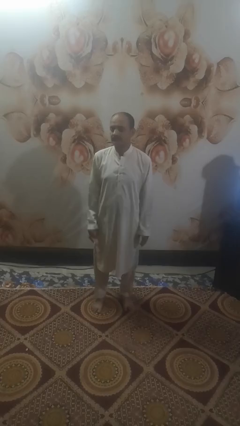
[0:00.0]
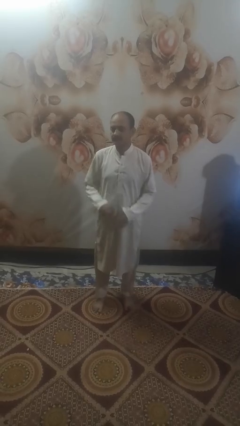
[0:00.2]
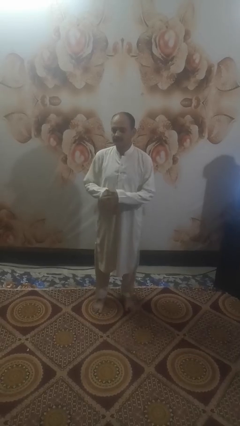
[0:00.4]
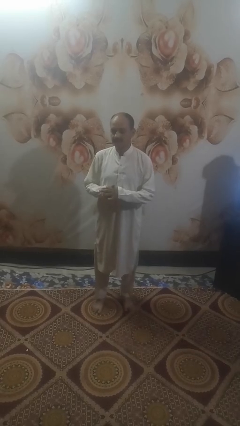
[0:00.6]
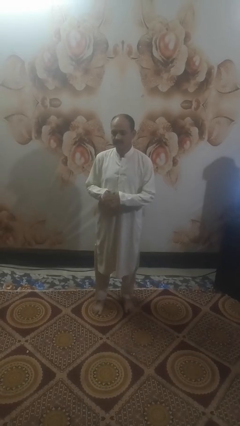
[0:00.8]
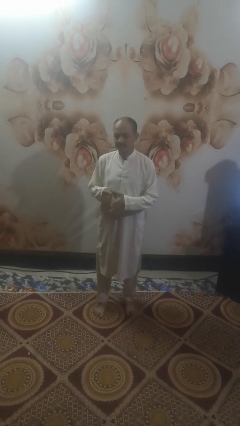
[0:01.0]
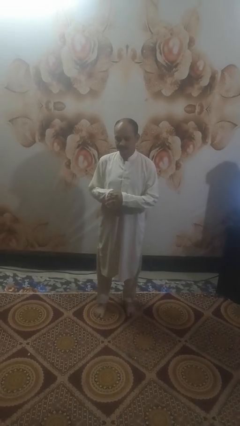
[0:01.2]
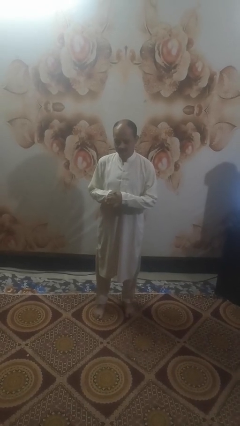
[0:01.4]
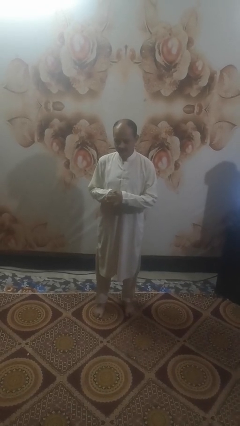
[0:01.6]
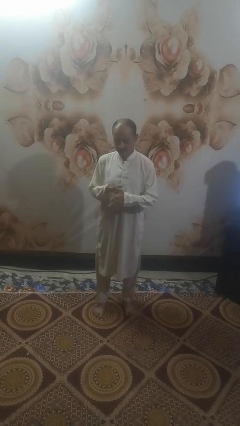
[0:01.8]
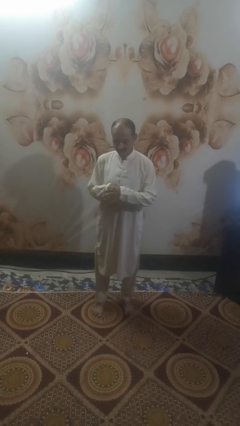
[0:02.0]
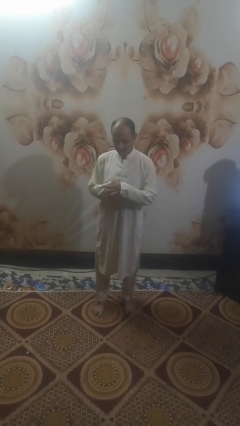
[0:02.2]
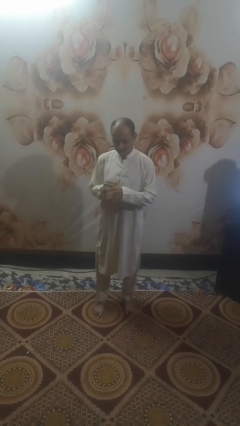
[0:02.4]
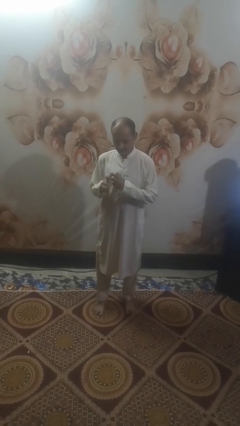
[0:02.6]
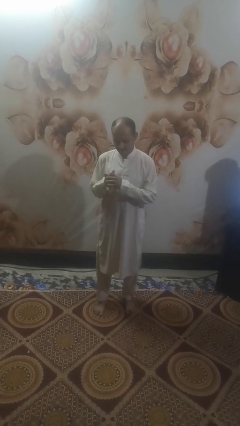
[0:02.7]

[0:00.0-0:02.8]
person cracks knuckles

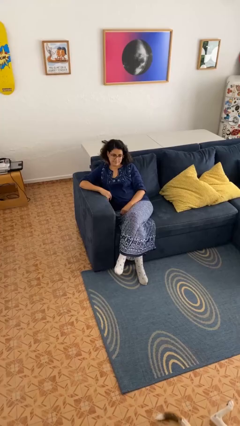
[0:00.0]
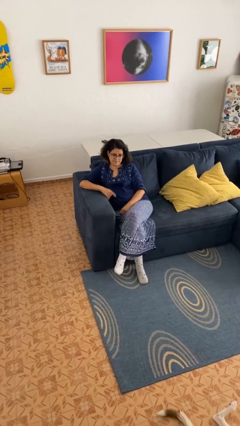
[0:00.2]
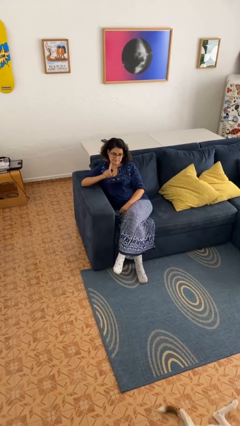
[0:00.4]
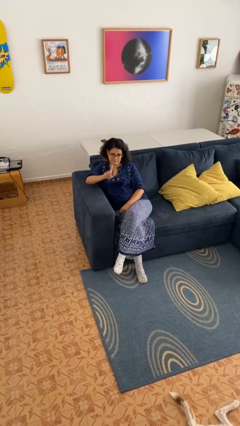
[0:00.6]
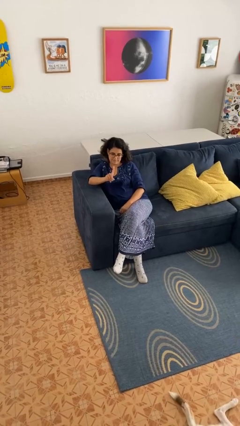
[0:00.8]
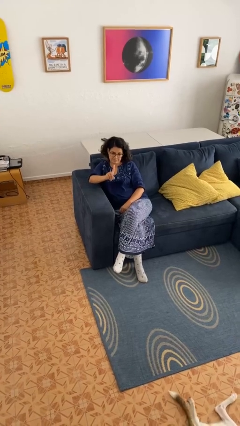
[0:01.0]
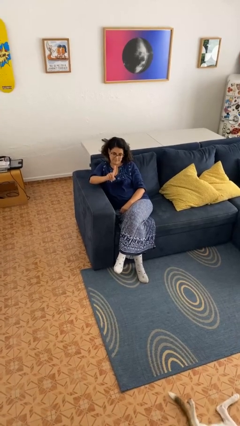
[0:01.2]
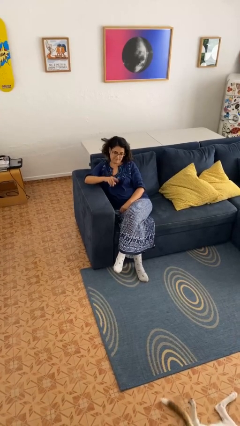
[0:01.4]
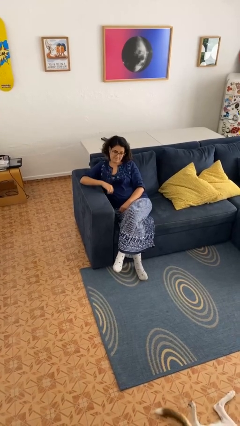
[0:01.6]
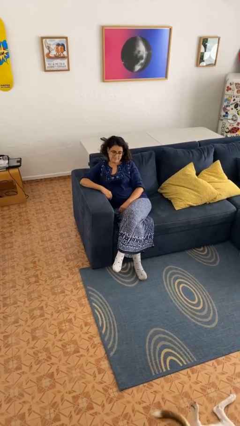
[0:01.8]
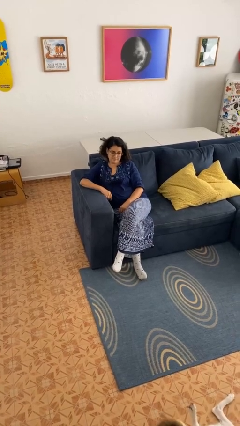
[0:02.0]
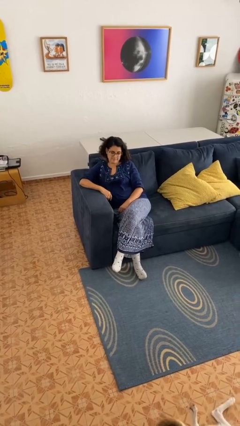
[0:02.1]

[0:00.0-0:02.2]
person gestures number one

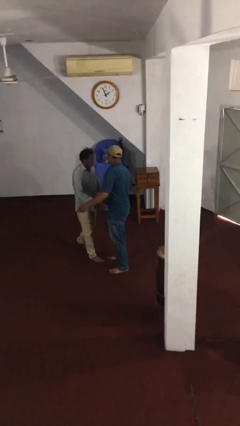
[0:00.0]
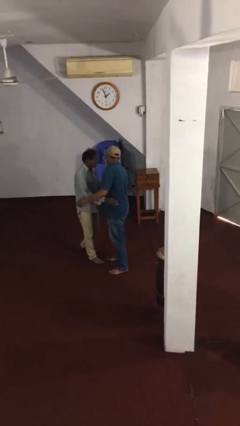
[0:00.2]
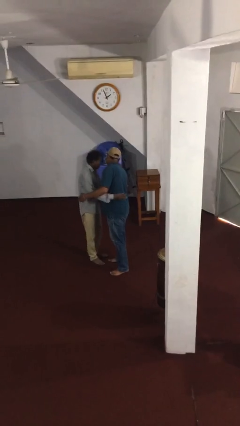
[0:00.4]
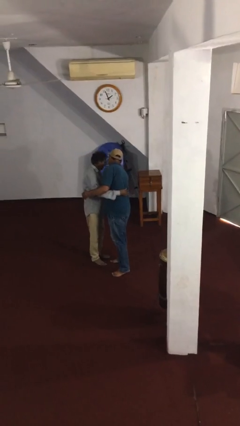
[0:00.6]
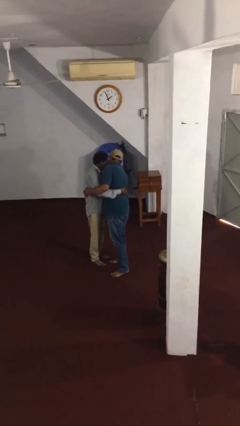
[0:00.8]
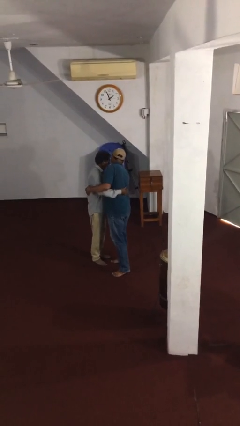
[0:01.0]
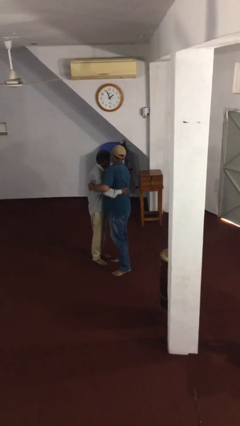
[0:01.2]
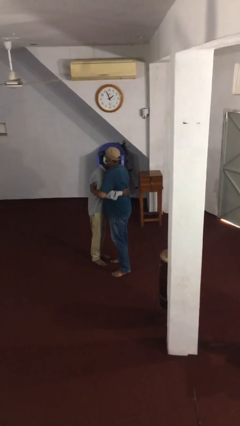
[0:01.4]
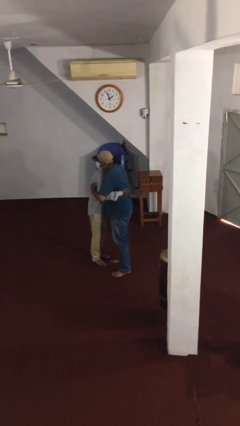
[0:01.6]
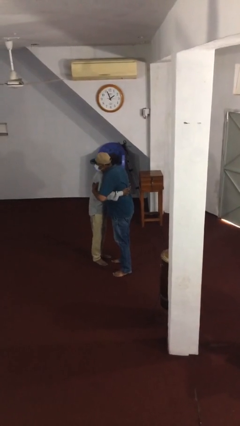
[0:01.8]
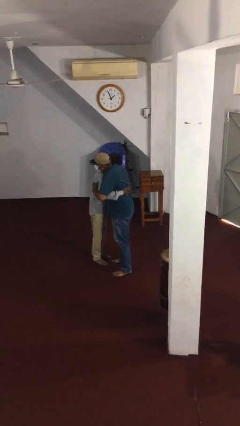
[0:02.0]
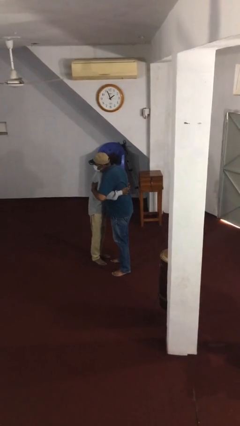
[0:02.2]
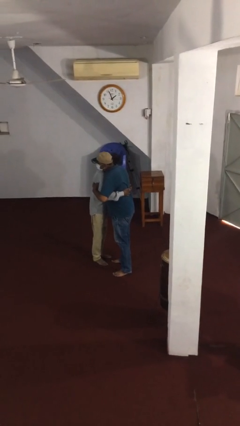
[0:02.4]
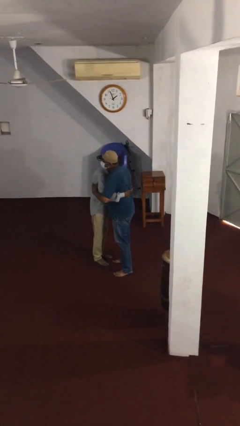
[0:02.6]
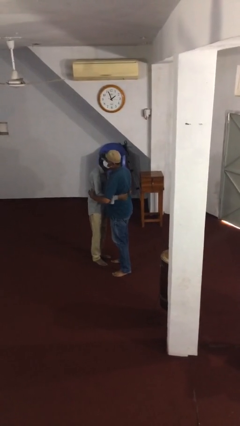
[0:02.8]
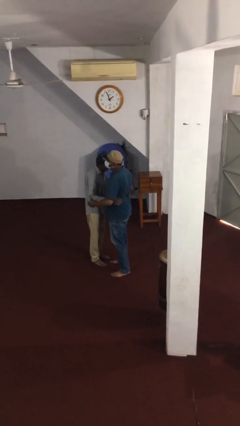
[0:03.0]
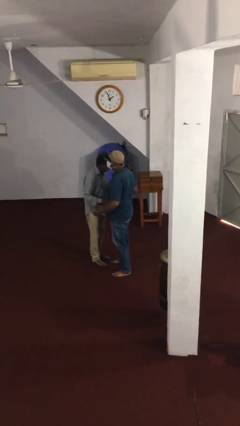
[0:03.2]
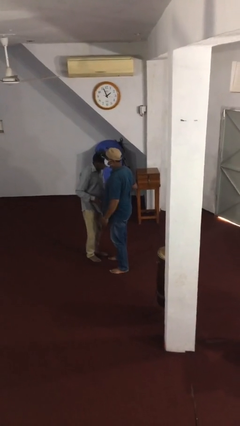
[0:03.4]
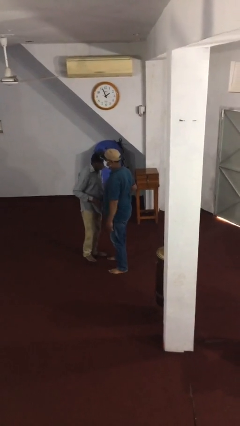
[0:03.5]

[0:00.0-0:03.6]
person embraces person

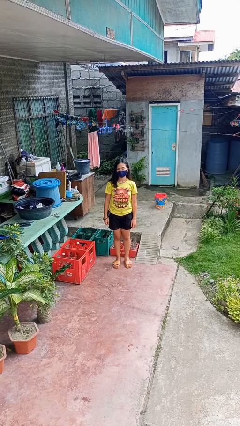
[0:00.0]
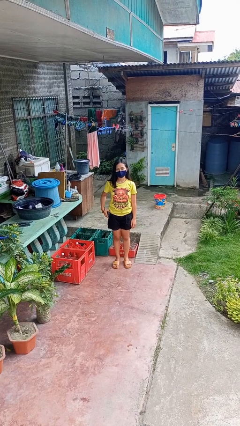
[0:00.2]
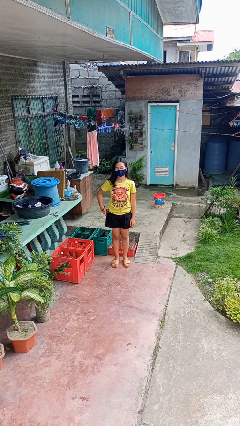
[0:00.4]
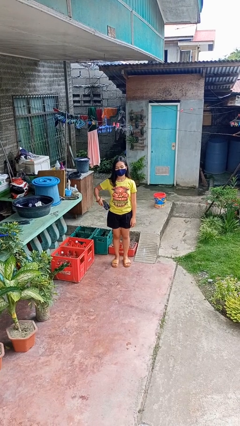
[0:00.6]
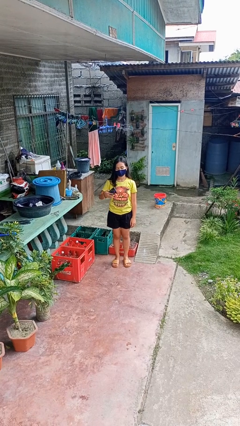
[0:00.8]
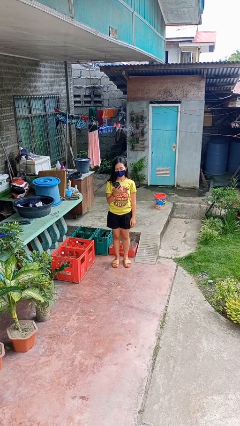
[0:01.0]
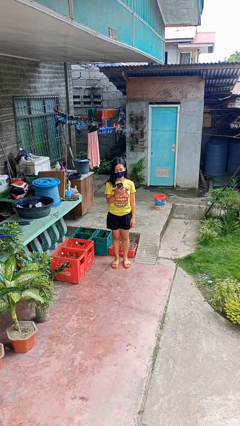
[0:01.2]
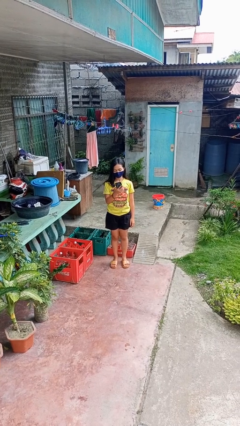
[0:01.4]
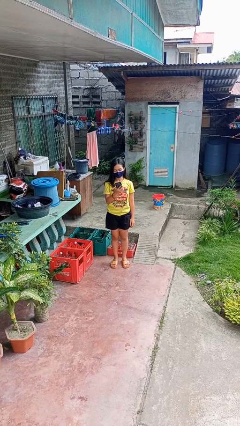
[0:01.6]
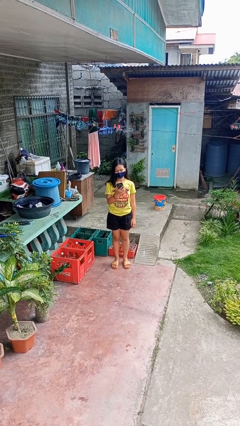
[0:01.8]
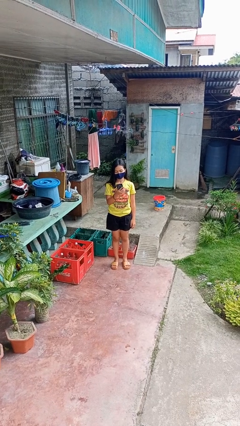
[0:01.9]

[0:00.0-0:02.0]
person takes phone from pocket

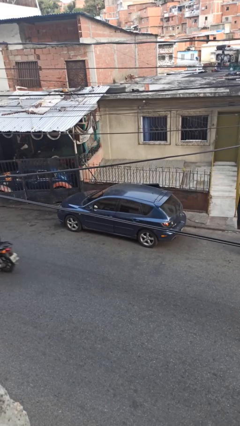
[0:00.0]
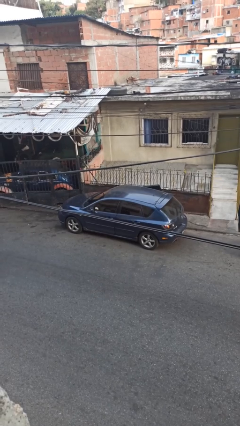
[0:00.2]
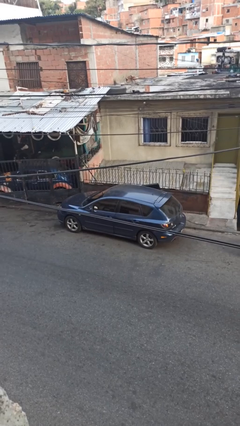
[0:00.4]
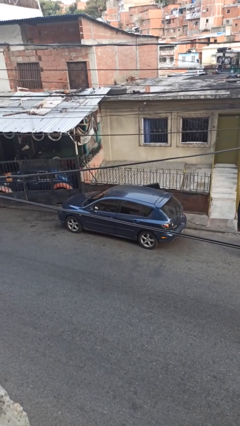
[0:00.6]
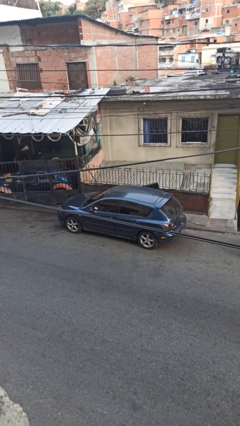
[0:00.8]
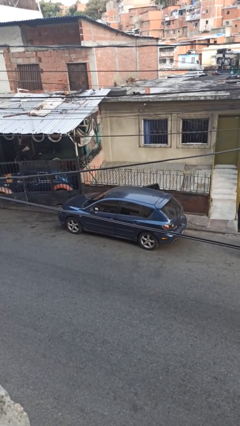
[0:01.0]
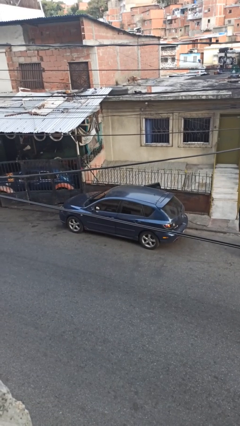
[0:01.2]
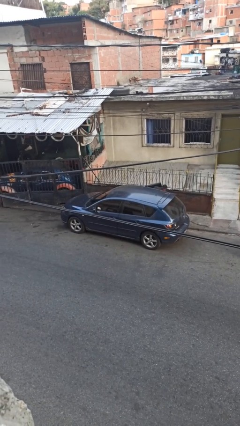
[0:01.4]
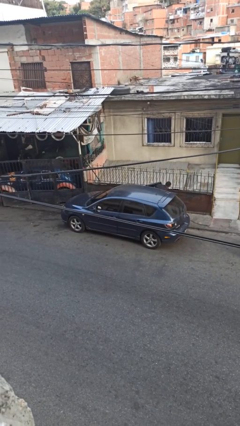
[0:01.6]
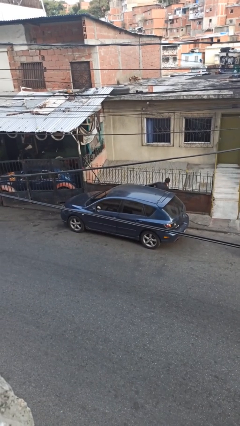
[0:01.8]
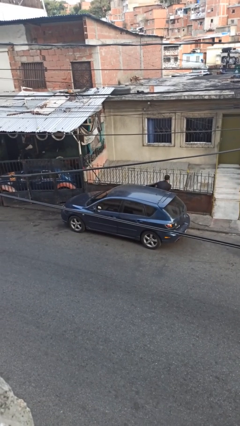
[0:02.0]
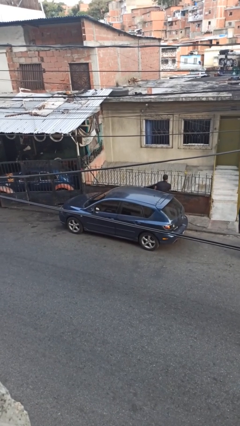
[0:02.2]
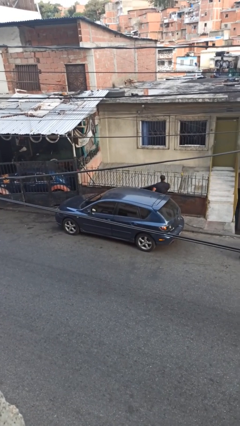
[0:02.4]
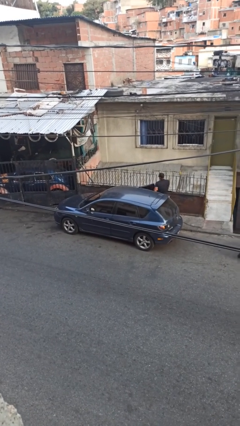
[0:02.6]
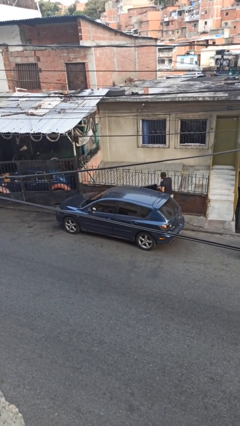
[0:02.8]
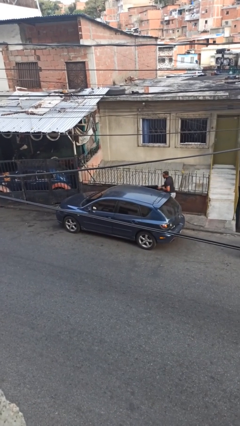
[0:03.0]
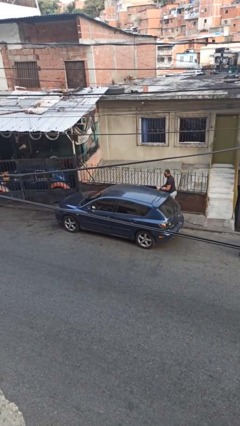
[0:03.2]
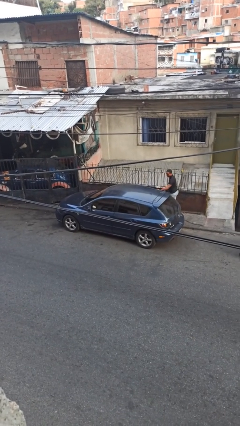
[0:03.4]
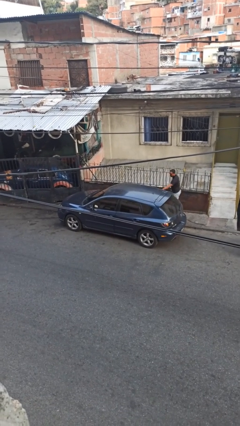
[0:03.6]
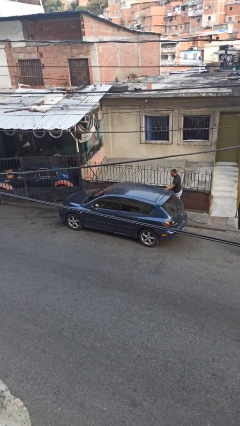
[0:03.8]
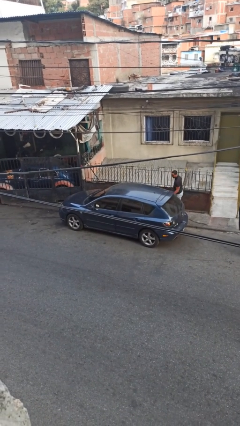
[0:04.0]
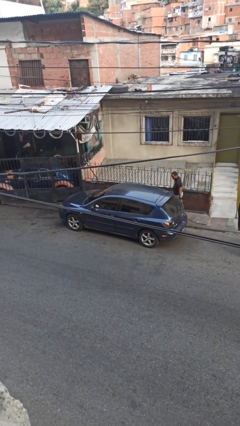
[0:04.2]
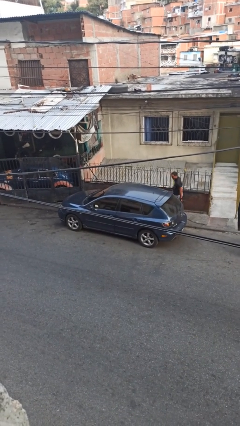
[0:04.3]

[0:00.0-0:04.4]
car drops off person

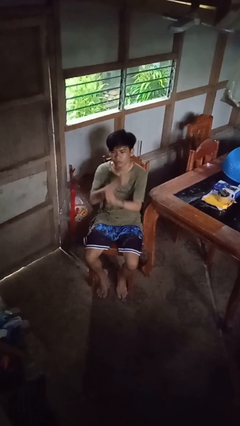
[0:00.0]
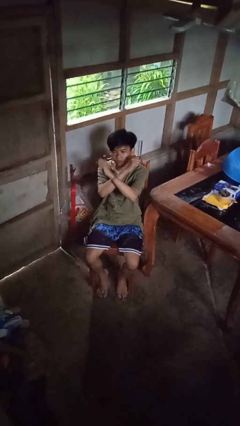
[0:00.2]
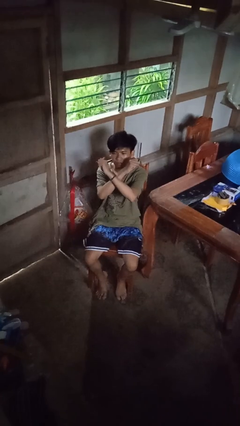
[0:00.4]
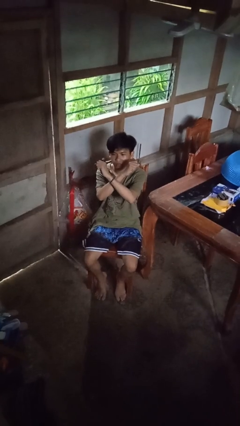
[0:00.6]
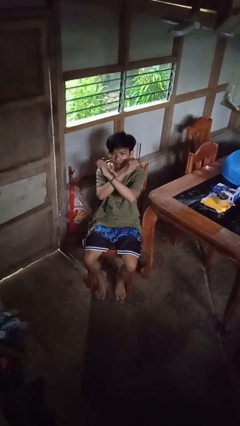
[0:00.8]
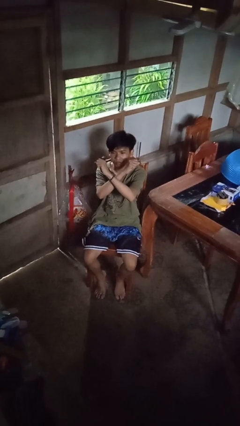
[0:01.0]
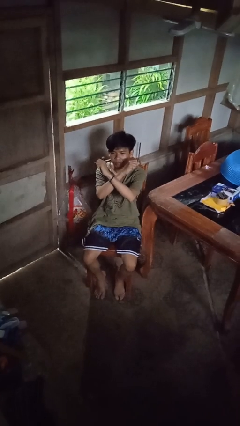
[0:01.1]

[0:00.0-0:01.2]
person gestures arms x

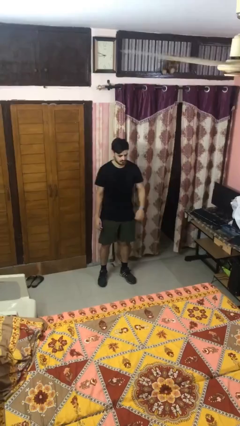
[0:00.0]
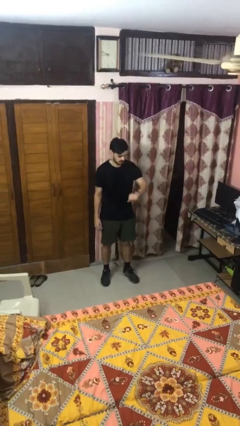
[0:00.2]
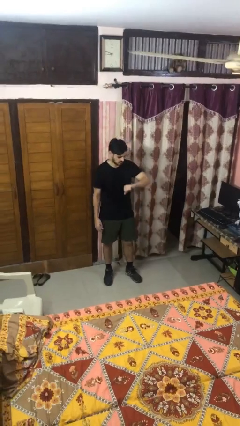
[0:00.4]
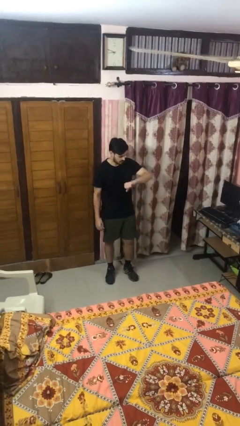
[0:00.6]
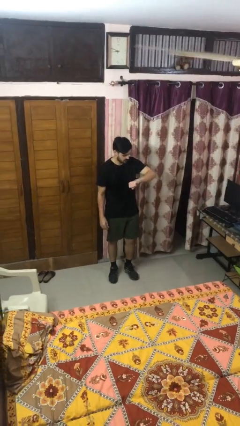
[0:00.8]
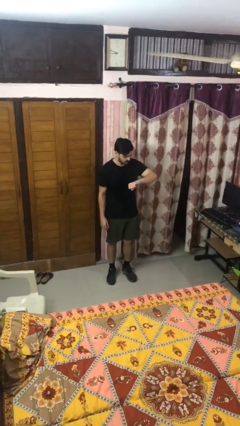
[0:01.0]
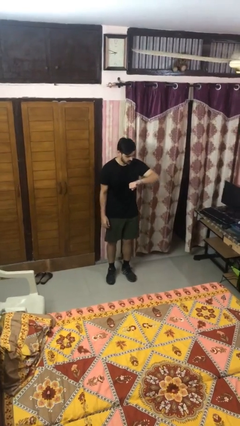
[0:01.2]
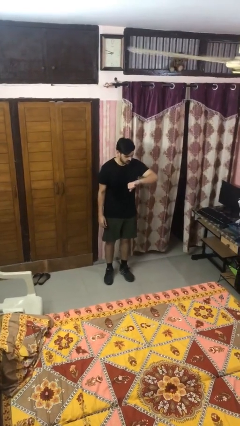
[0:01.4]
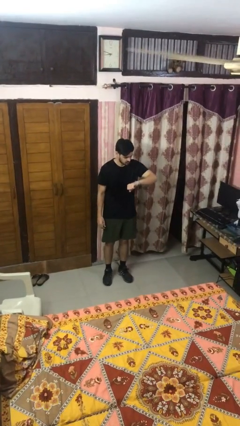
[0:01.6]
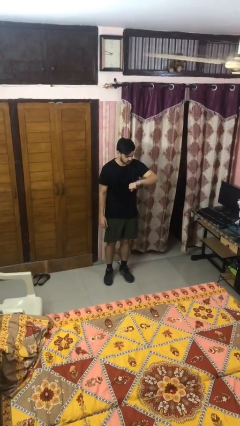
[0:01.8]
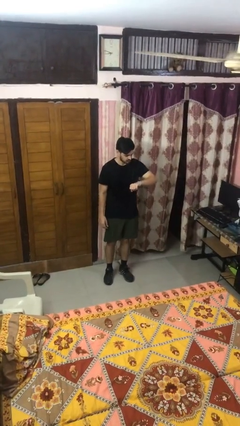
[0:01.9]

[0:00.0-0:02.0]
person looks at wristwatch
